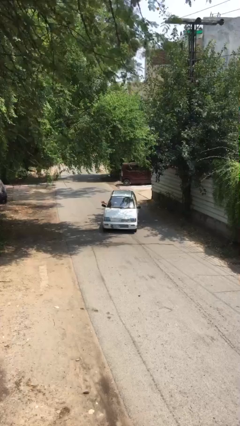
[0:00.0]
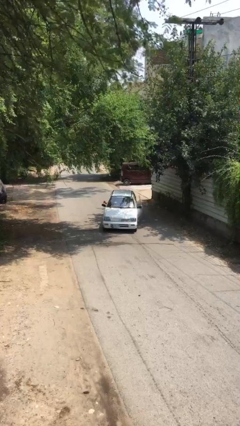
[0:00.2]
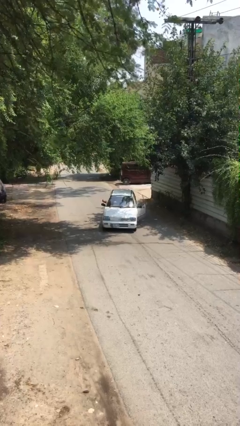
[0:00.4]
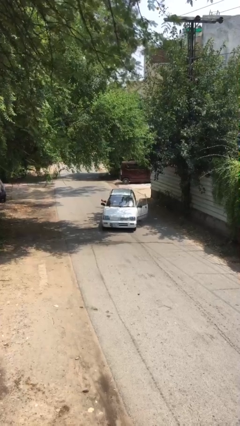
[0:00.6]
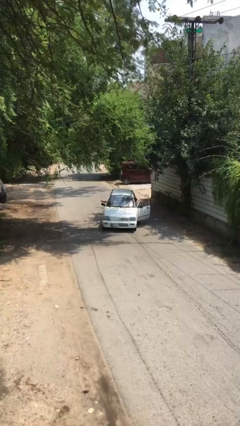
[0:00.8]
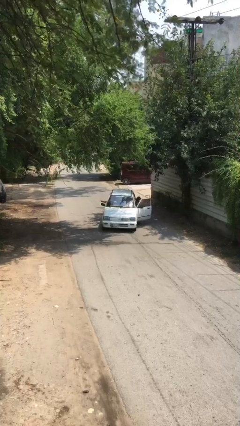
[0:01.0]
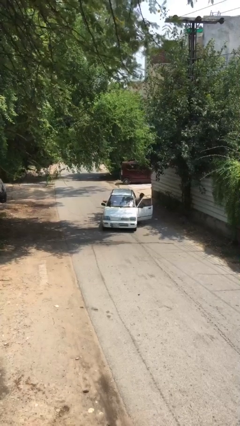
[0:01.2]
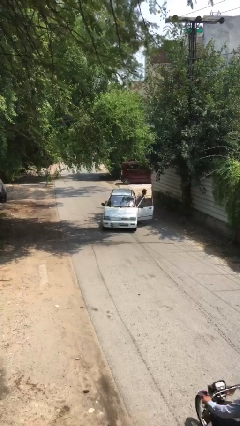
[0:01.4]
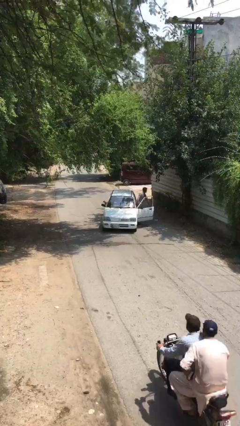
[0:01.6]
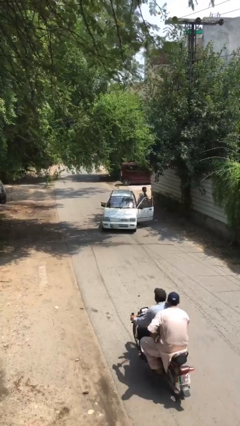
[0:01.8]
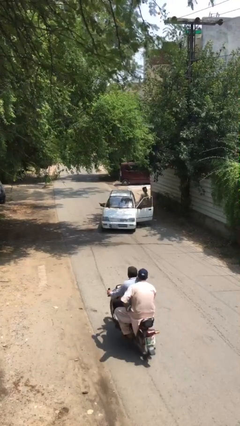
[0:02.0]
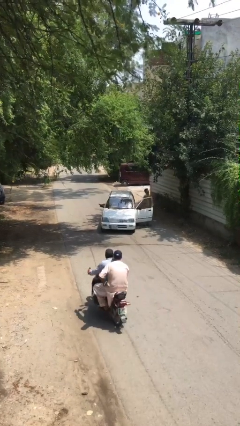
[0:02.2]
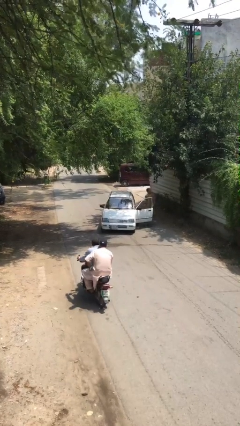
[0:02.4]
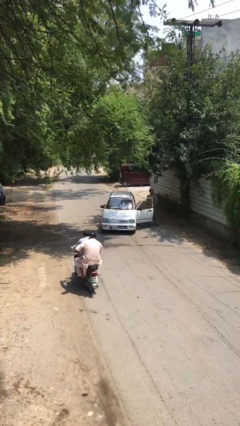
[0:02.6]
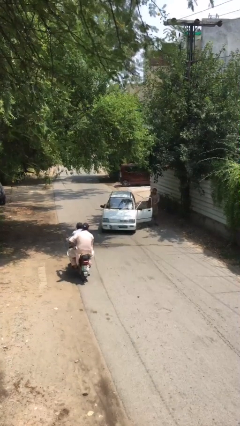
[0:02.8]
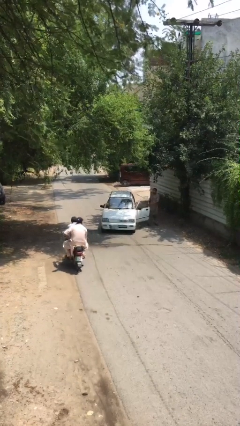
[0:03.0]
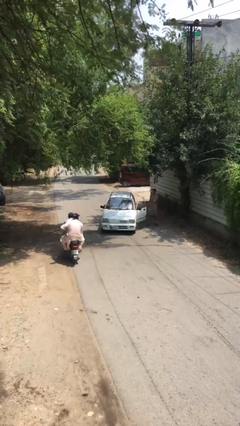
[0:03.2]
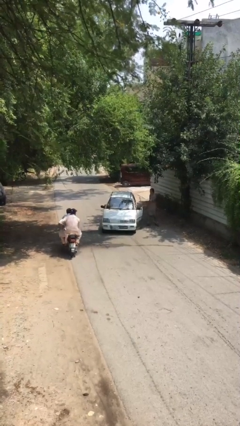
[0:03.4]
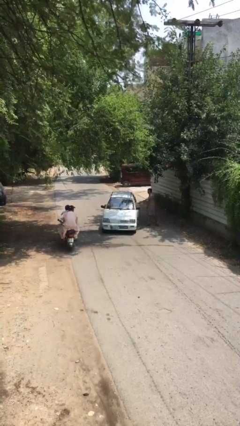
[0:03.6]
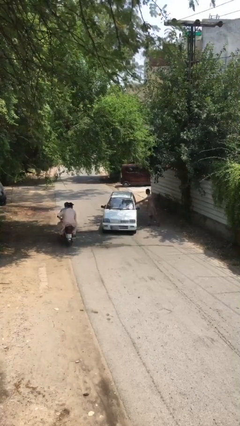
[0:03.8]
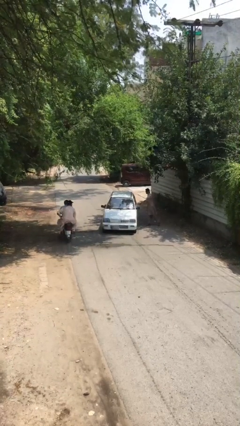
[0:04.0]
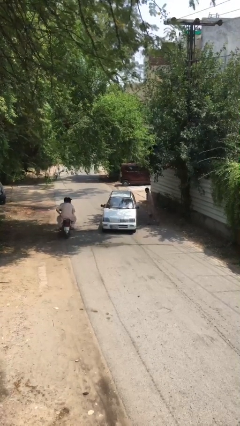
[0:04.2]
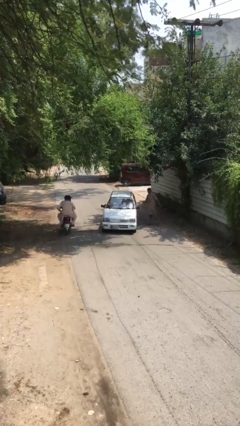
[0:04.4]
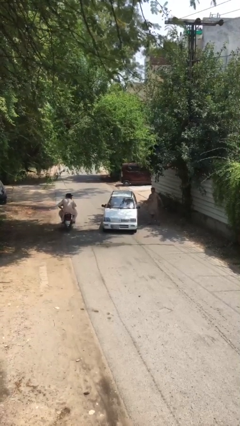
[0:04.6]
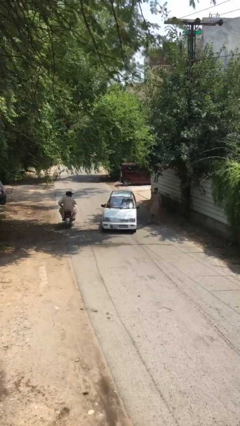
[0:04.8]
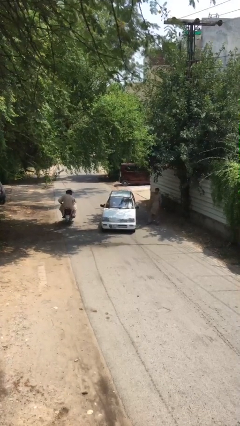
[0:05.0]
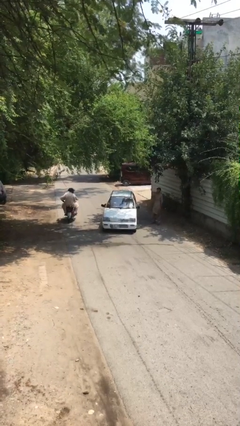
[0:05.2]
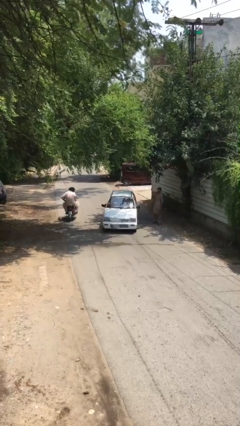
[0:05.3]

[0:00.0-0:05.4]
car drops off person

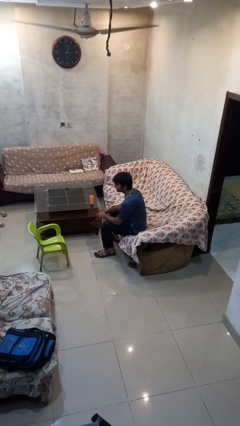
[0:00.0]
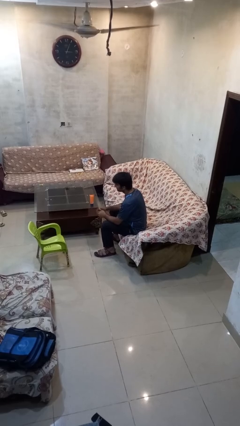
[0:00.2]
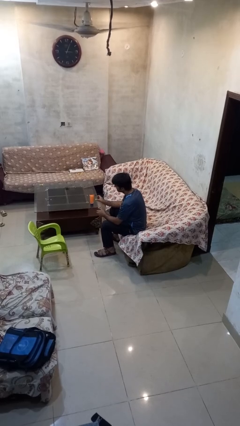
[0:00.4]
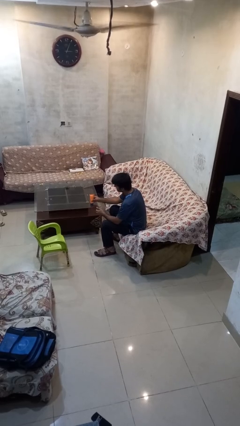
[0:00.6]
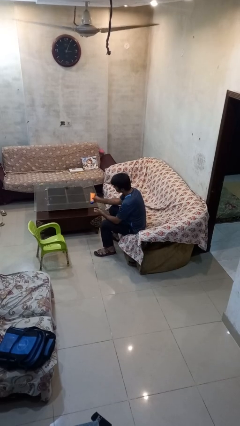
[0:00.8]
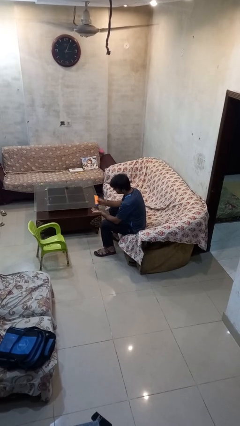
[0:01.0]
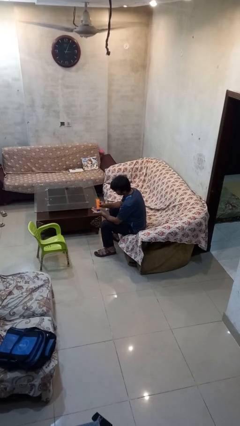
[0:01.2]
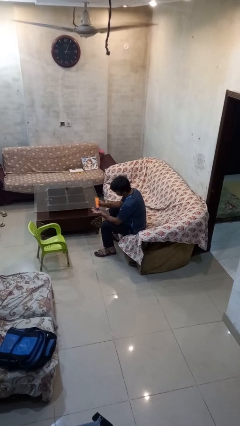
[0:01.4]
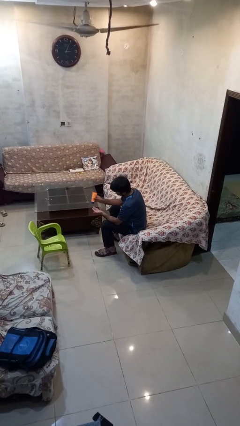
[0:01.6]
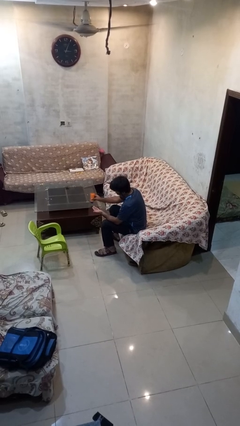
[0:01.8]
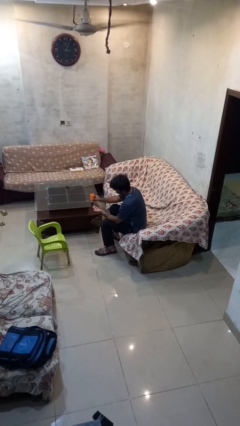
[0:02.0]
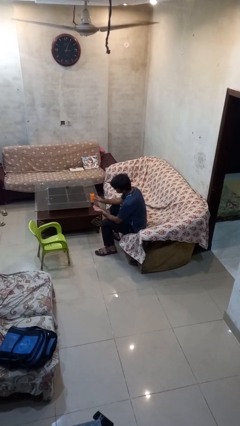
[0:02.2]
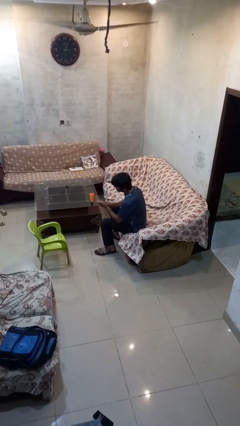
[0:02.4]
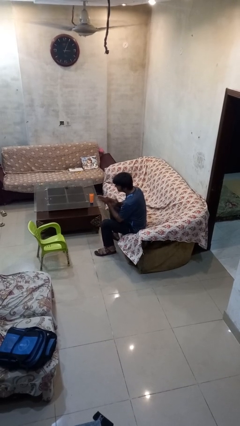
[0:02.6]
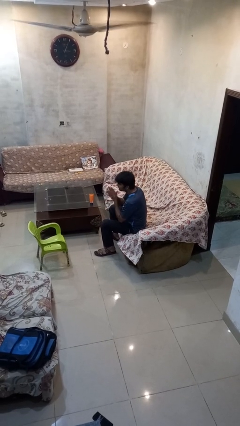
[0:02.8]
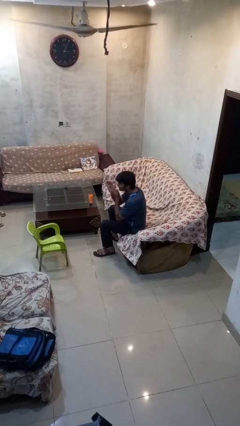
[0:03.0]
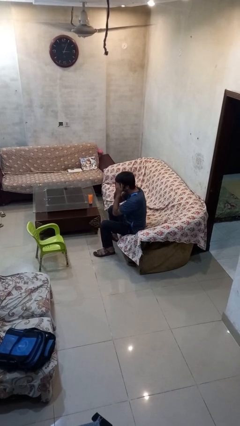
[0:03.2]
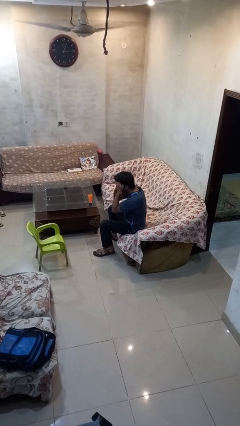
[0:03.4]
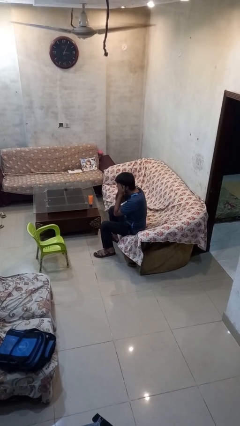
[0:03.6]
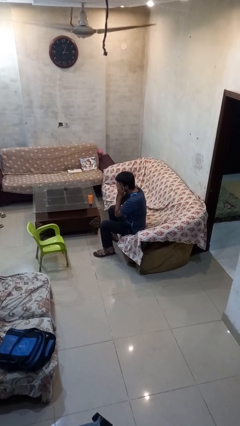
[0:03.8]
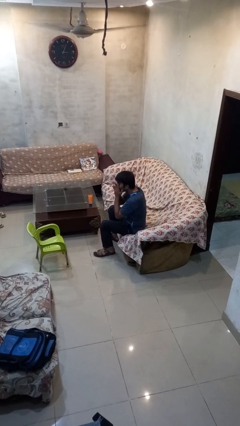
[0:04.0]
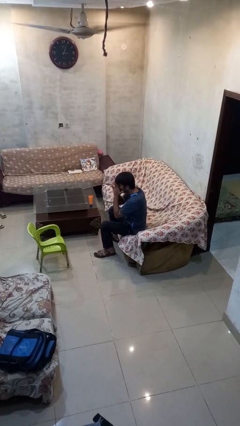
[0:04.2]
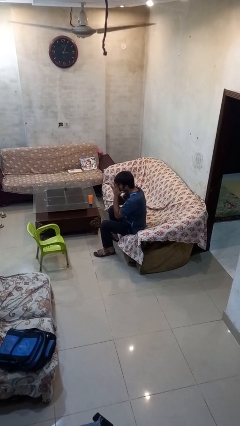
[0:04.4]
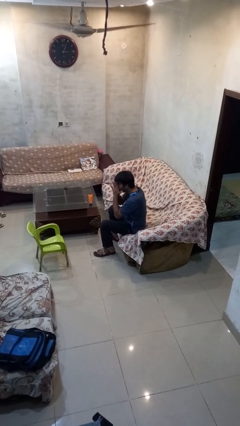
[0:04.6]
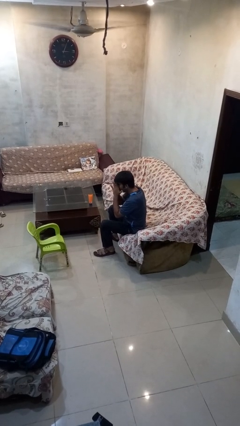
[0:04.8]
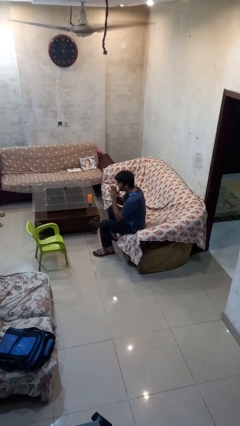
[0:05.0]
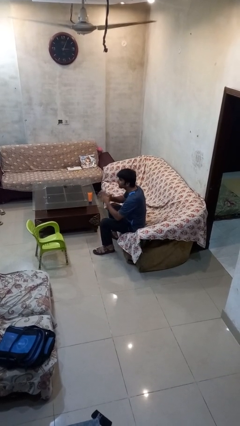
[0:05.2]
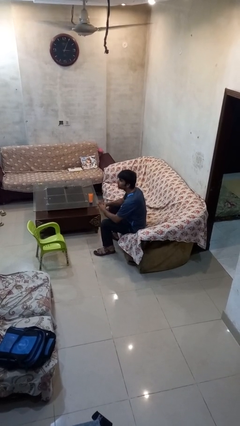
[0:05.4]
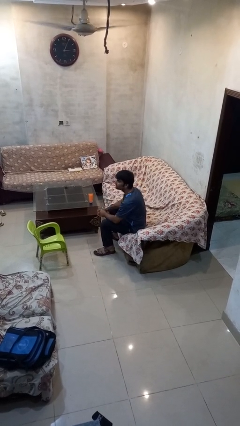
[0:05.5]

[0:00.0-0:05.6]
person applies sunscreen

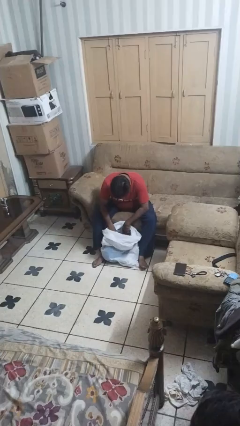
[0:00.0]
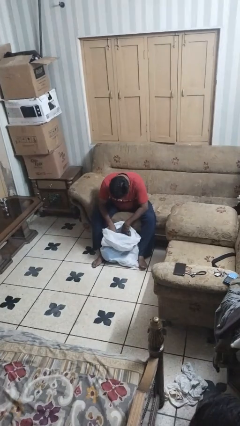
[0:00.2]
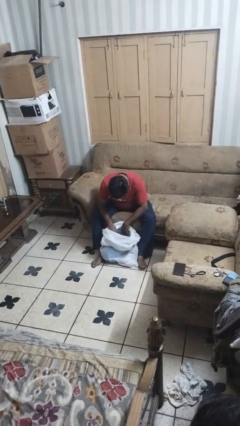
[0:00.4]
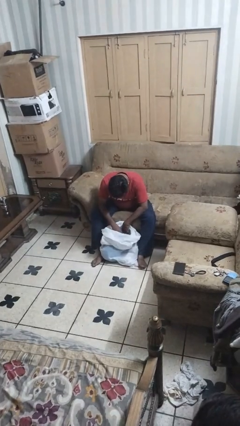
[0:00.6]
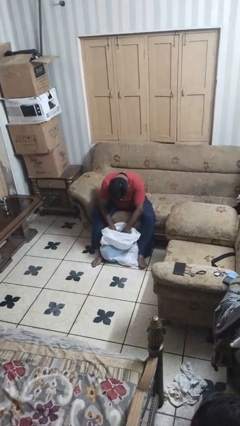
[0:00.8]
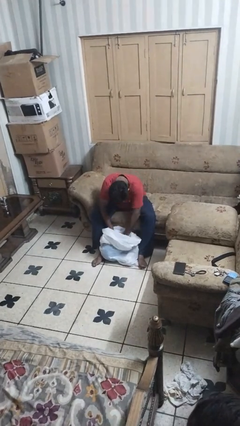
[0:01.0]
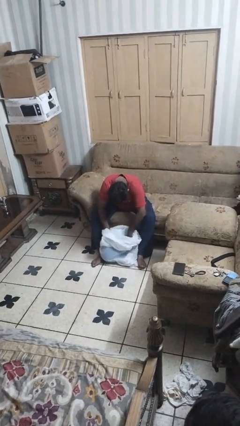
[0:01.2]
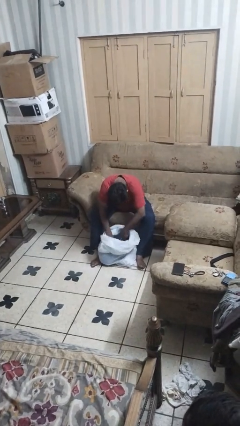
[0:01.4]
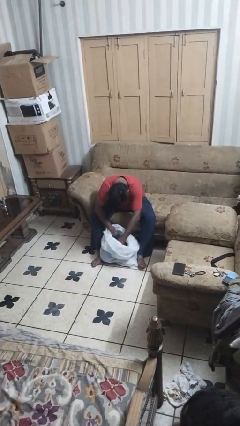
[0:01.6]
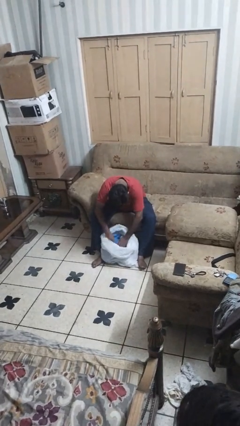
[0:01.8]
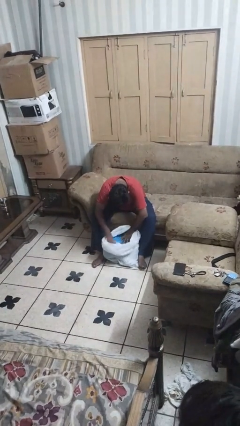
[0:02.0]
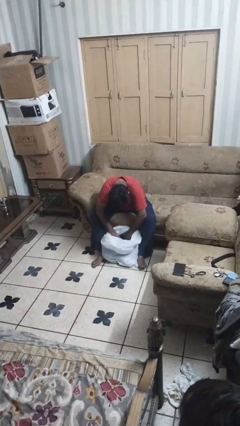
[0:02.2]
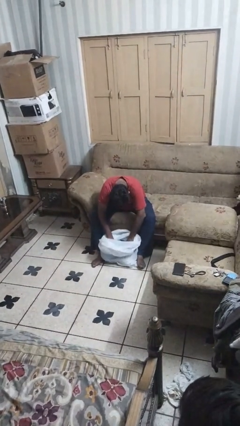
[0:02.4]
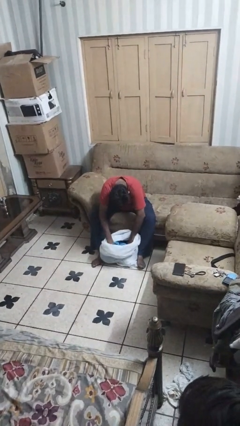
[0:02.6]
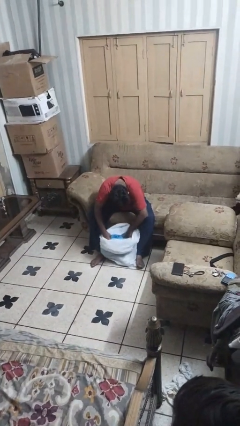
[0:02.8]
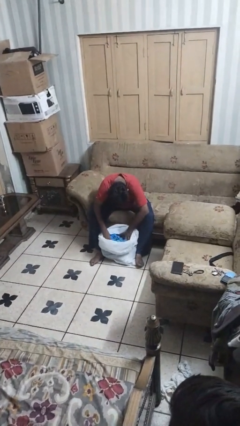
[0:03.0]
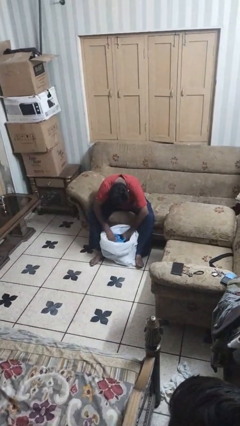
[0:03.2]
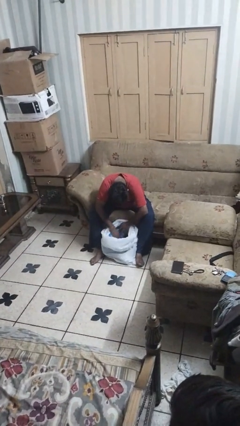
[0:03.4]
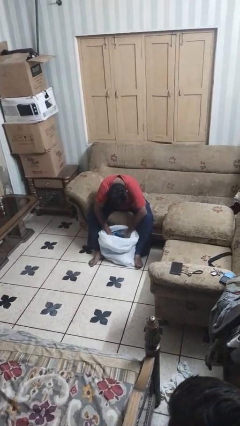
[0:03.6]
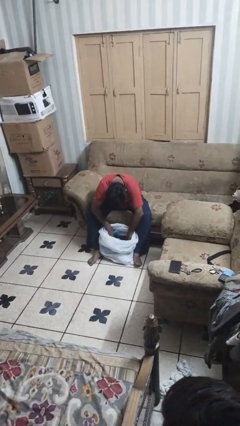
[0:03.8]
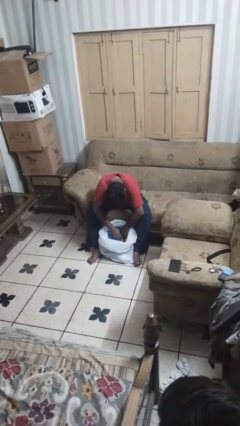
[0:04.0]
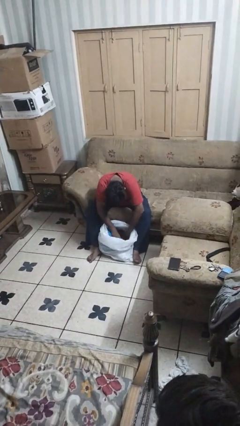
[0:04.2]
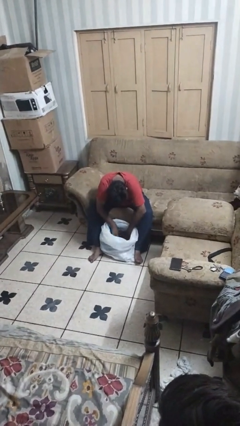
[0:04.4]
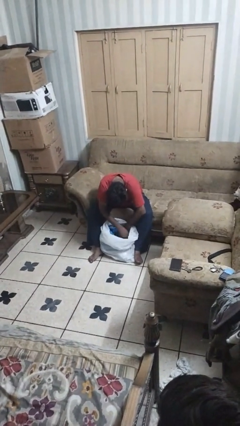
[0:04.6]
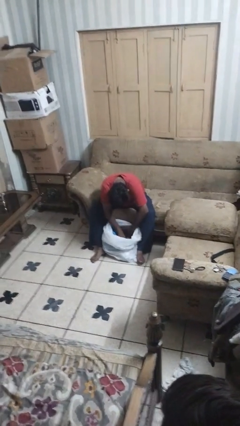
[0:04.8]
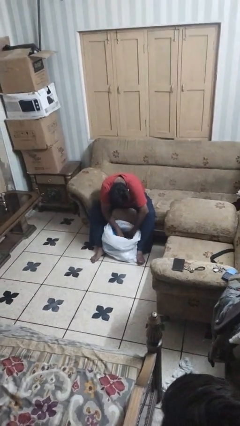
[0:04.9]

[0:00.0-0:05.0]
person searches in bag

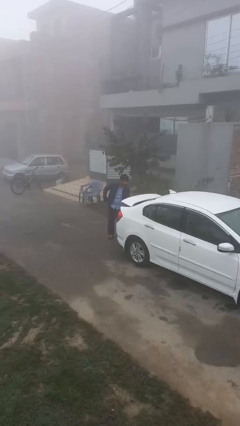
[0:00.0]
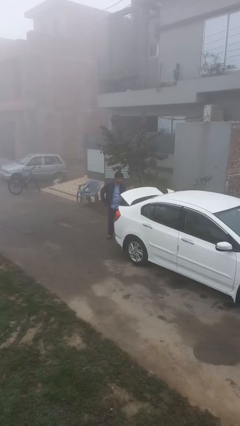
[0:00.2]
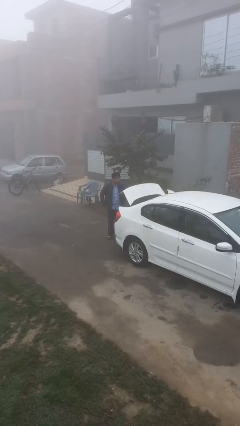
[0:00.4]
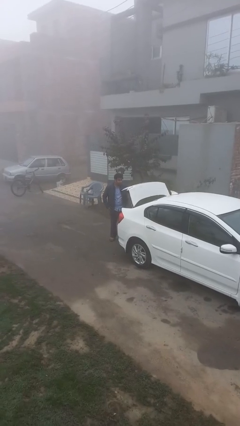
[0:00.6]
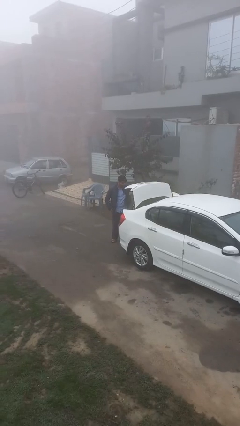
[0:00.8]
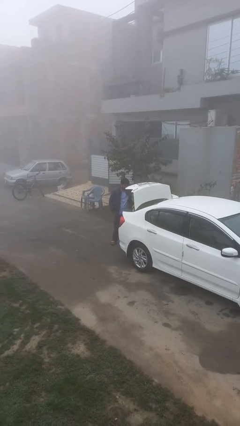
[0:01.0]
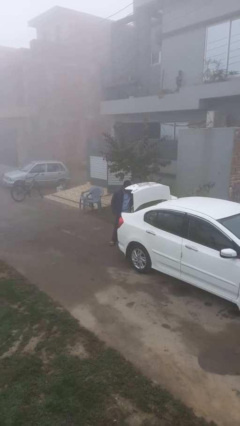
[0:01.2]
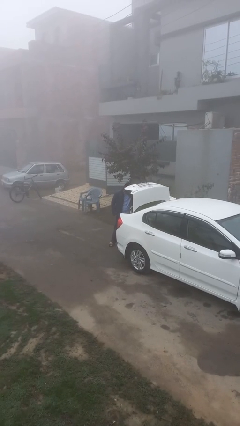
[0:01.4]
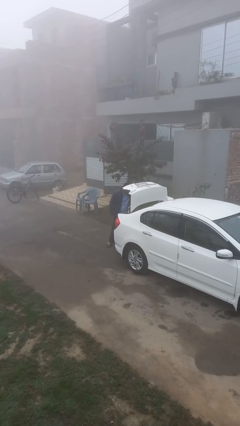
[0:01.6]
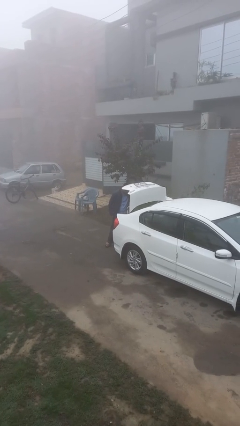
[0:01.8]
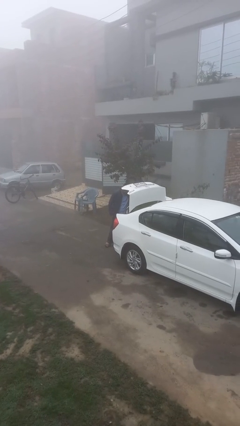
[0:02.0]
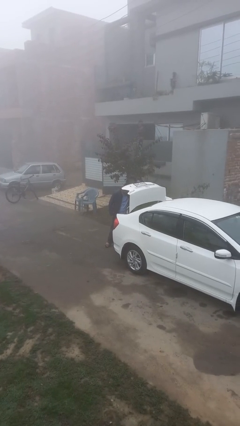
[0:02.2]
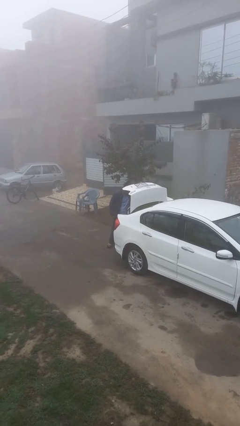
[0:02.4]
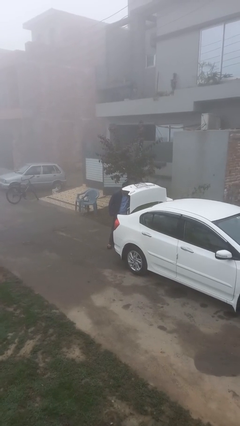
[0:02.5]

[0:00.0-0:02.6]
person opens car trunk
